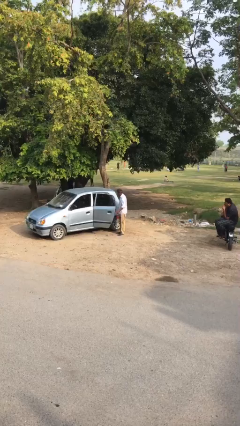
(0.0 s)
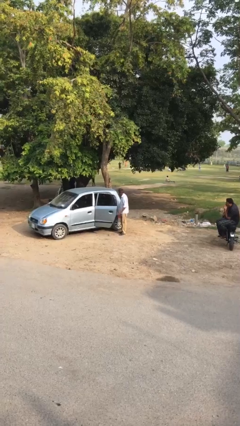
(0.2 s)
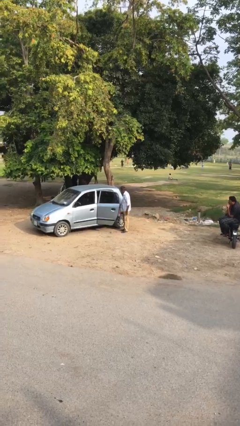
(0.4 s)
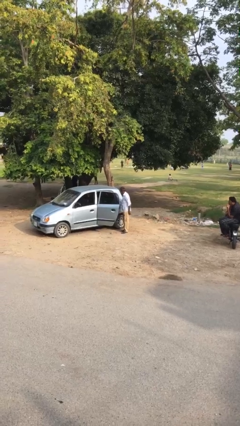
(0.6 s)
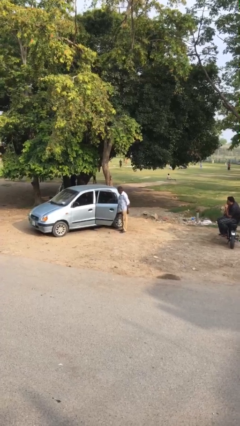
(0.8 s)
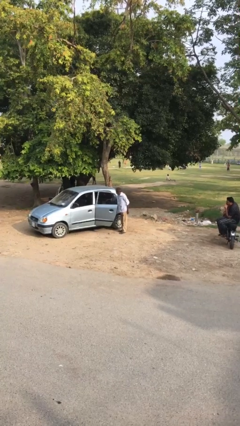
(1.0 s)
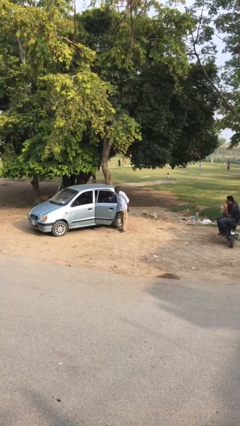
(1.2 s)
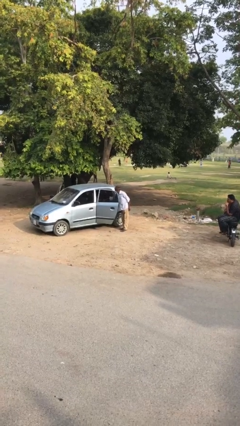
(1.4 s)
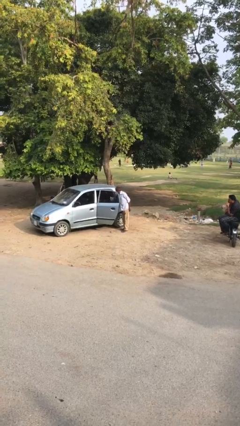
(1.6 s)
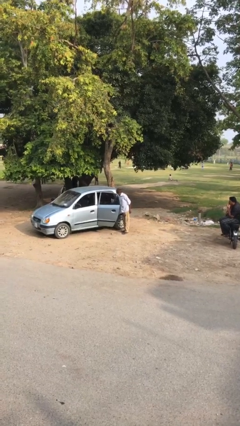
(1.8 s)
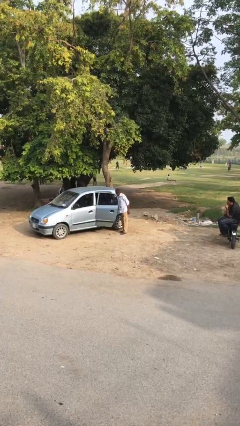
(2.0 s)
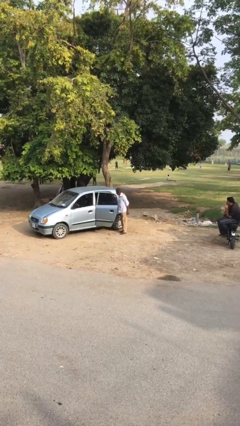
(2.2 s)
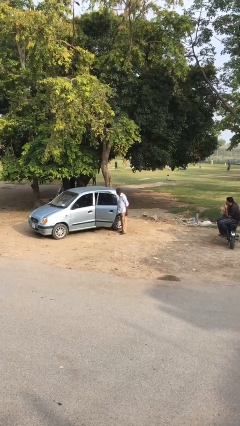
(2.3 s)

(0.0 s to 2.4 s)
person loads car

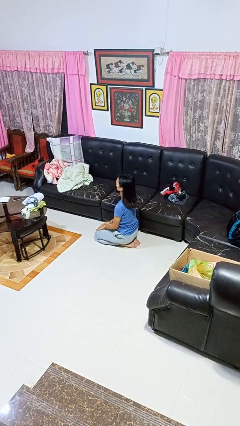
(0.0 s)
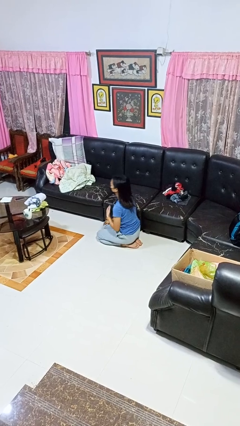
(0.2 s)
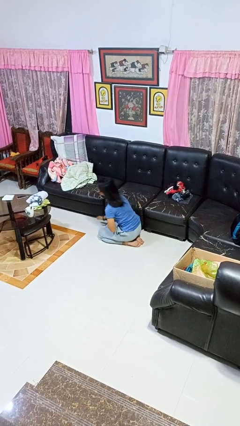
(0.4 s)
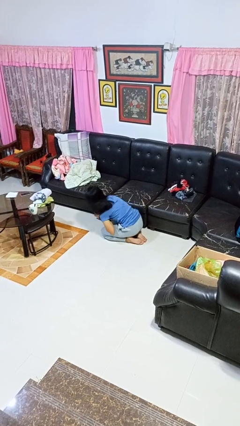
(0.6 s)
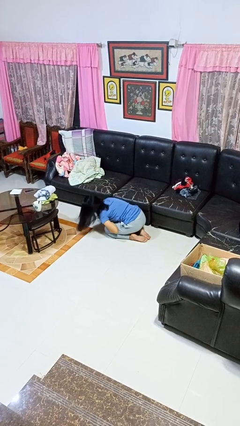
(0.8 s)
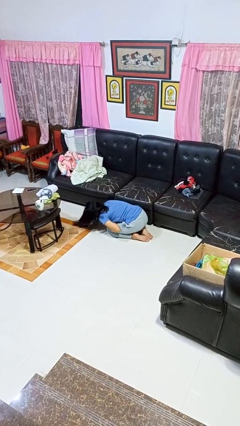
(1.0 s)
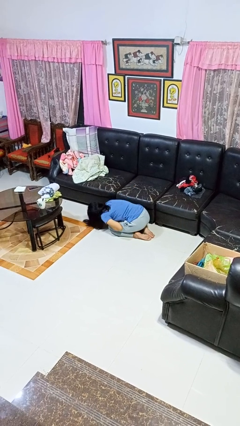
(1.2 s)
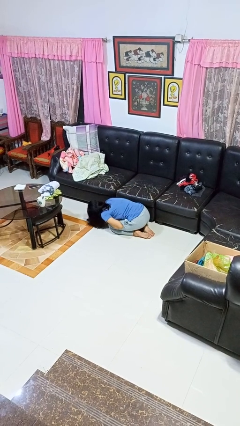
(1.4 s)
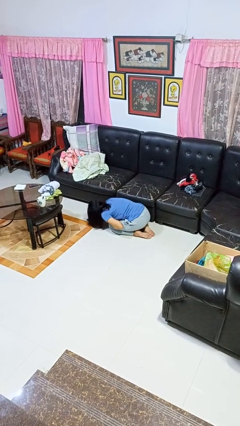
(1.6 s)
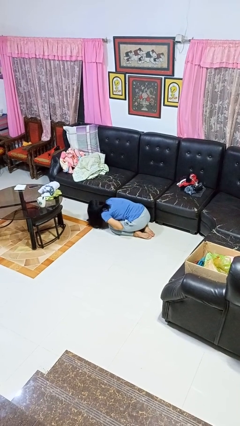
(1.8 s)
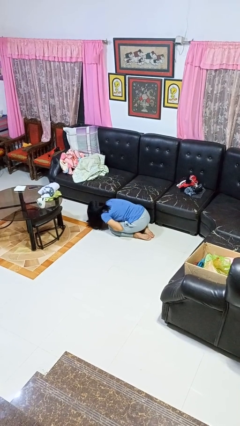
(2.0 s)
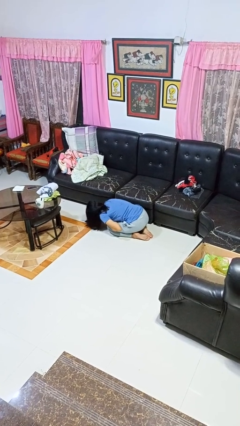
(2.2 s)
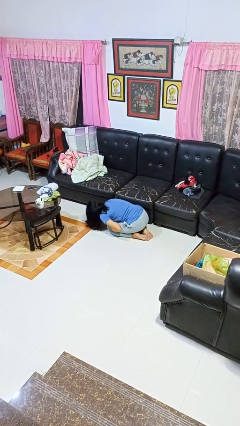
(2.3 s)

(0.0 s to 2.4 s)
person searches under couch

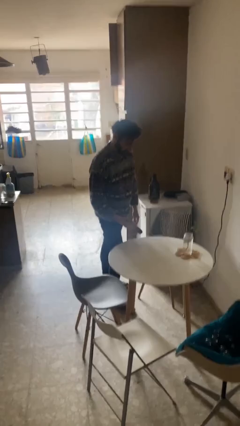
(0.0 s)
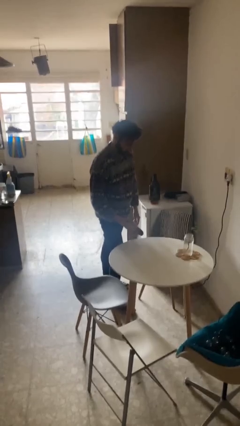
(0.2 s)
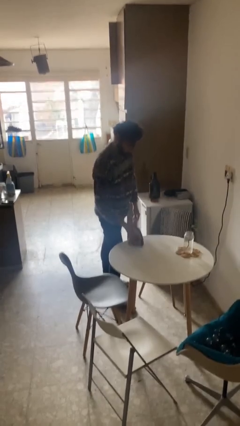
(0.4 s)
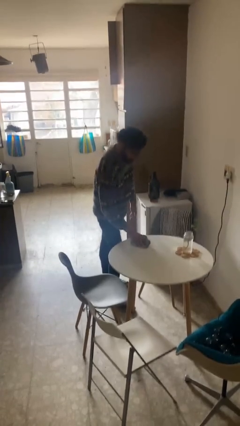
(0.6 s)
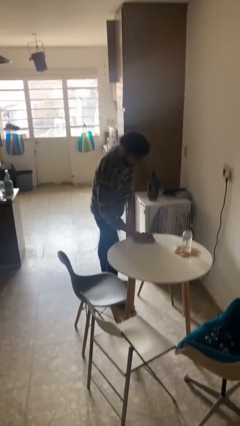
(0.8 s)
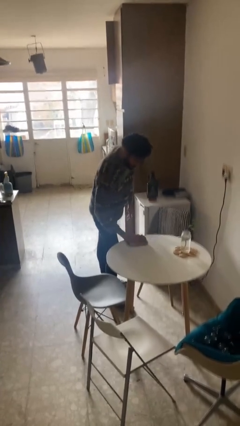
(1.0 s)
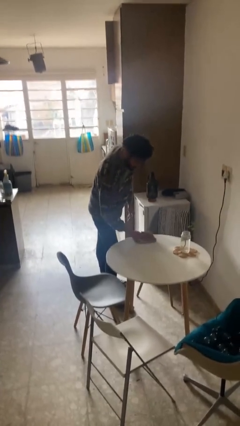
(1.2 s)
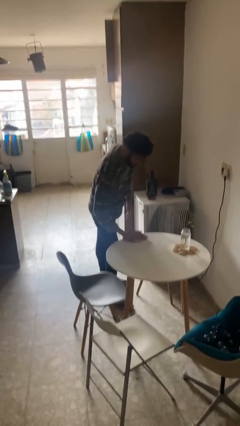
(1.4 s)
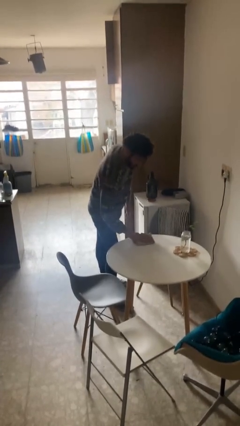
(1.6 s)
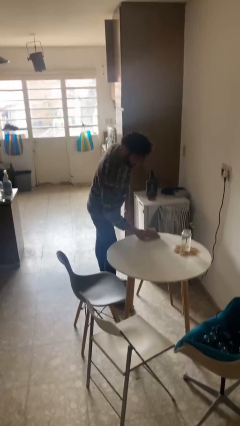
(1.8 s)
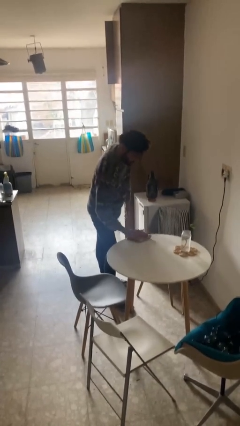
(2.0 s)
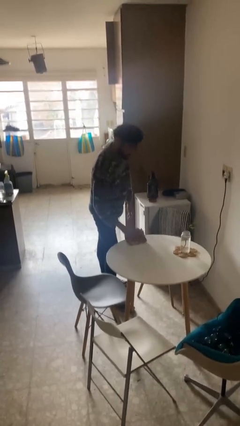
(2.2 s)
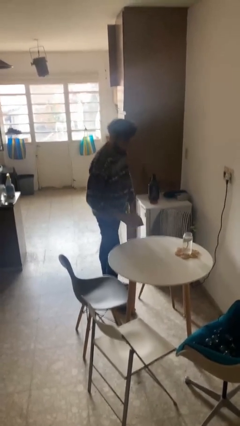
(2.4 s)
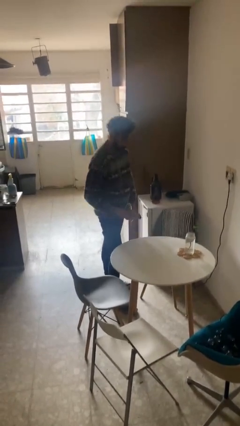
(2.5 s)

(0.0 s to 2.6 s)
person cleans table with rag

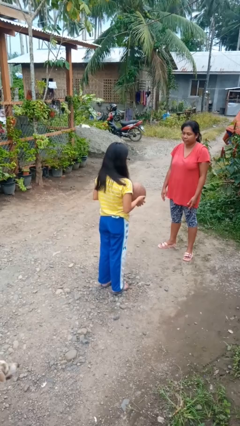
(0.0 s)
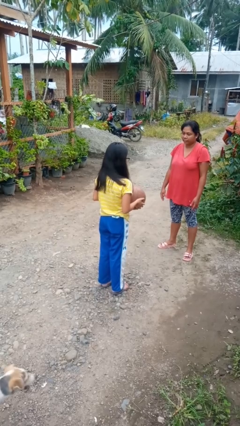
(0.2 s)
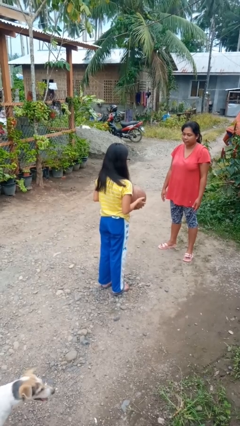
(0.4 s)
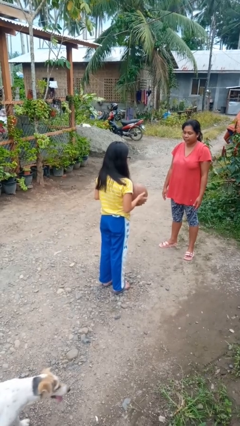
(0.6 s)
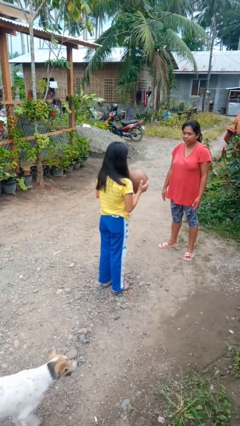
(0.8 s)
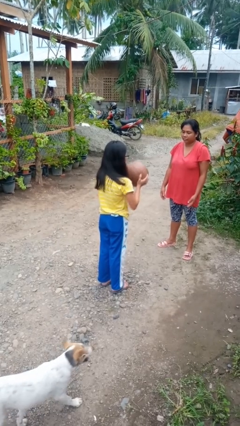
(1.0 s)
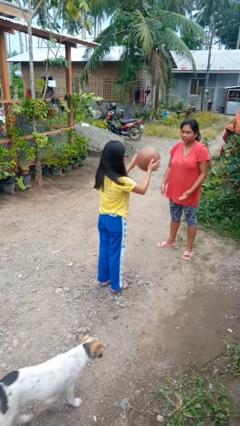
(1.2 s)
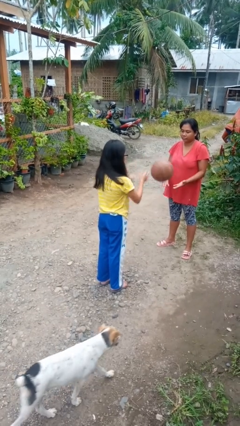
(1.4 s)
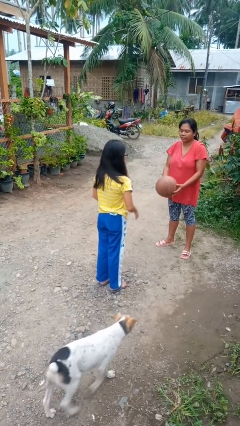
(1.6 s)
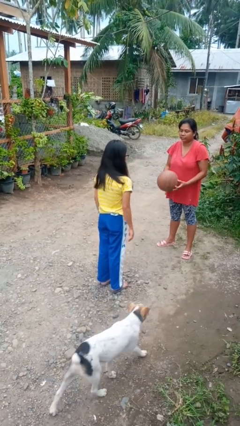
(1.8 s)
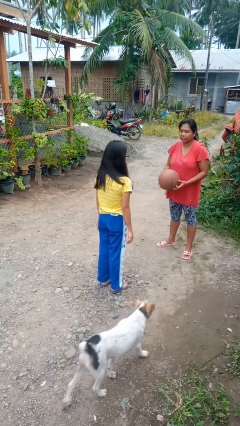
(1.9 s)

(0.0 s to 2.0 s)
person throws object to person

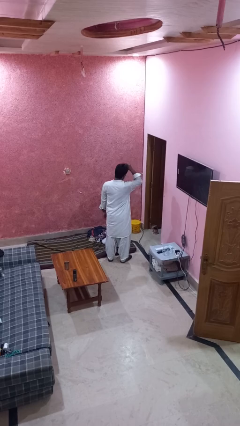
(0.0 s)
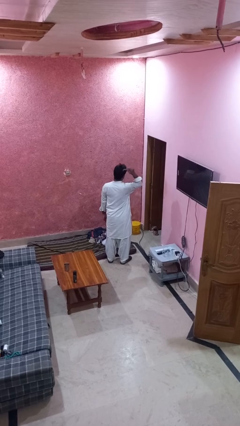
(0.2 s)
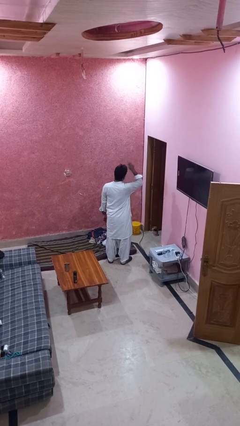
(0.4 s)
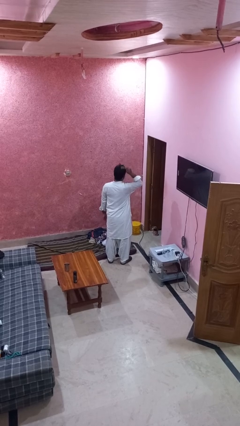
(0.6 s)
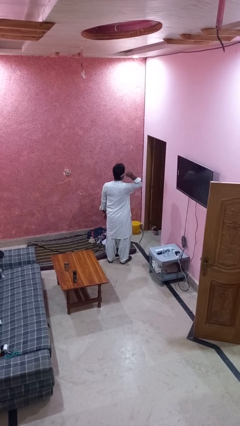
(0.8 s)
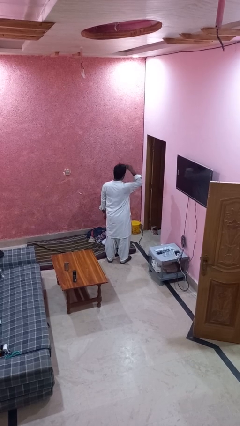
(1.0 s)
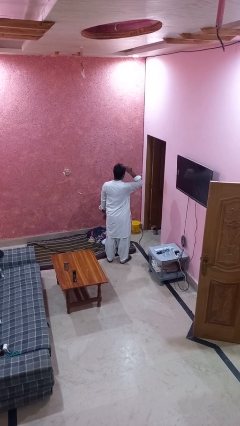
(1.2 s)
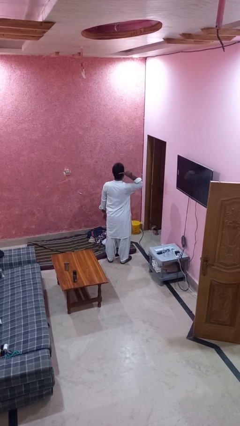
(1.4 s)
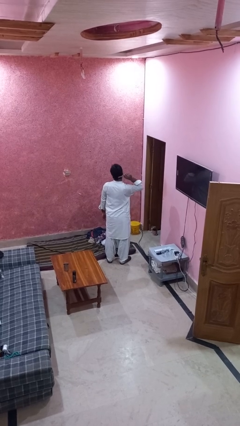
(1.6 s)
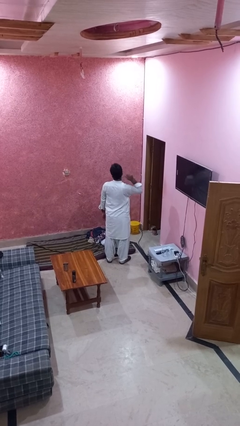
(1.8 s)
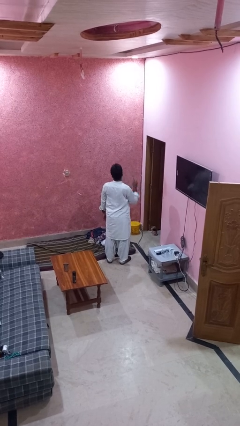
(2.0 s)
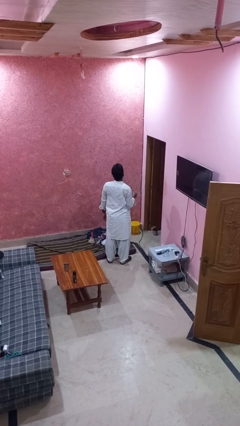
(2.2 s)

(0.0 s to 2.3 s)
person brushes hair

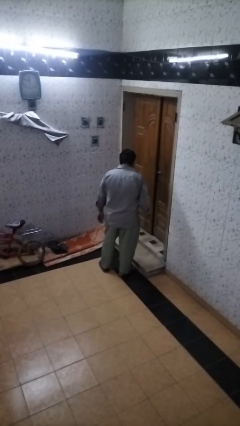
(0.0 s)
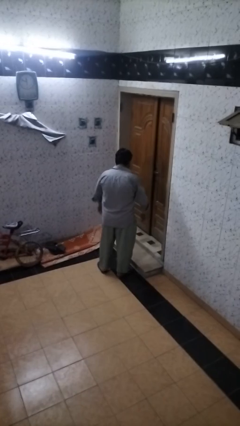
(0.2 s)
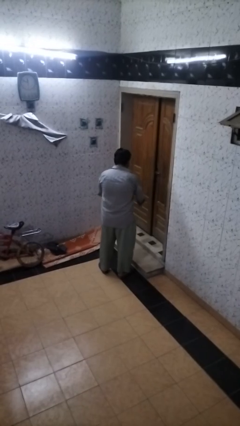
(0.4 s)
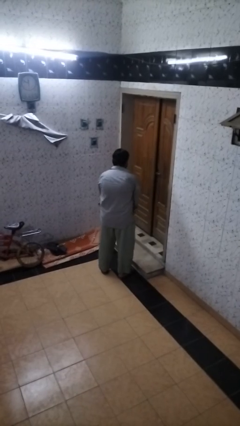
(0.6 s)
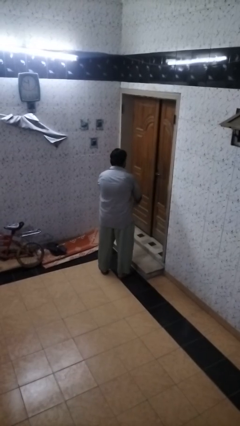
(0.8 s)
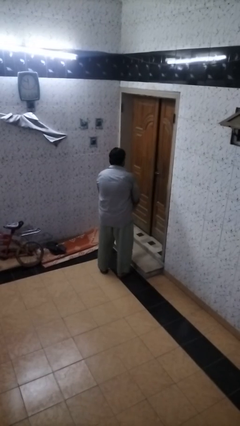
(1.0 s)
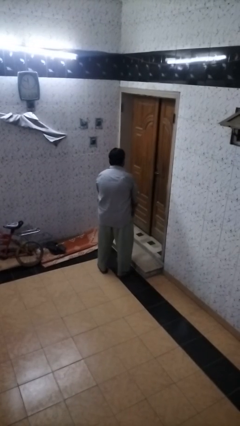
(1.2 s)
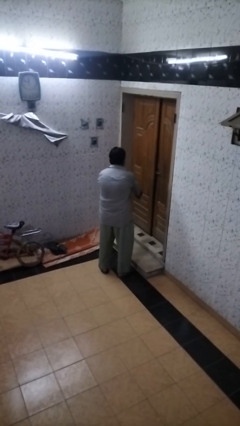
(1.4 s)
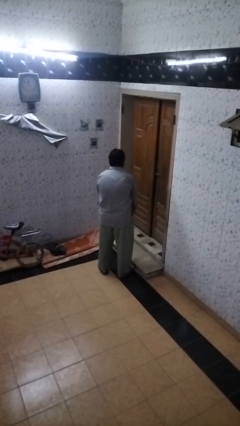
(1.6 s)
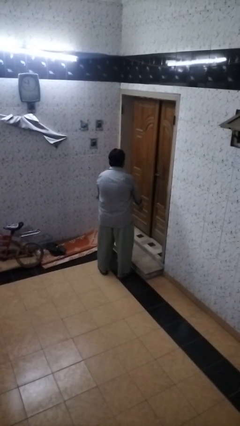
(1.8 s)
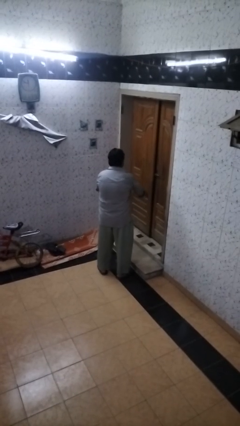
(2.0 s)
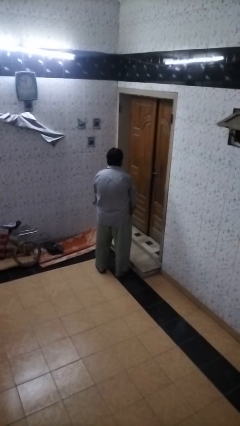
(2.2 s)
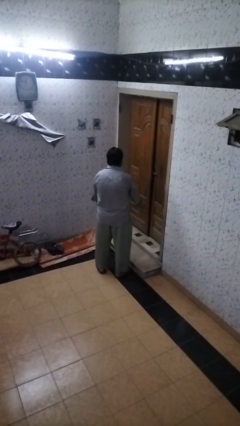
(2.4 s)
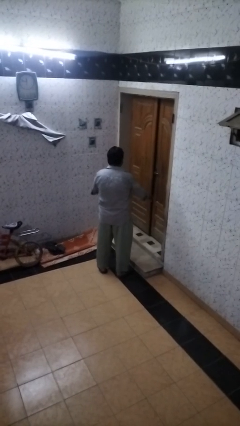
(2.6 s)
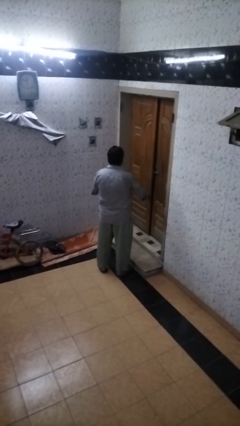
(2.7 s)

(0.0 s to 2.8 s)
person slaps hands on thighs

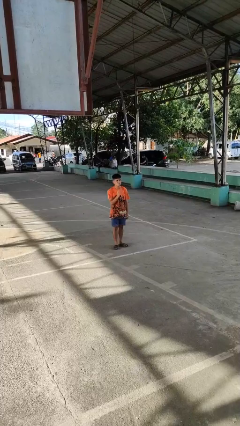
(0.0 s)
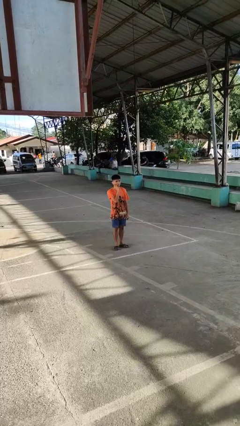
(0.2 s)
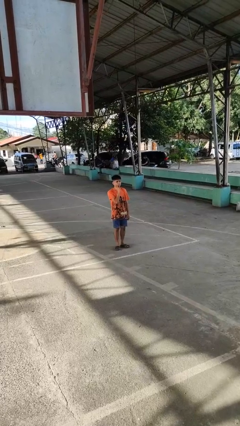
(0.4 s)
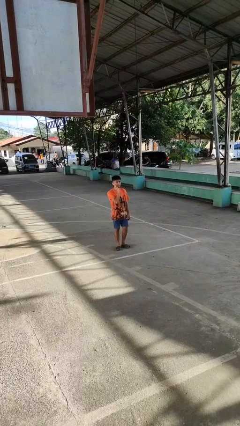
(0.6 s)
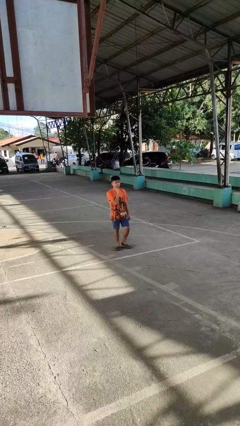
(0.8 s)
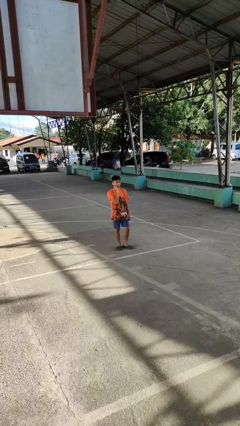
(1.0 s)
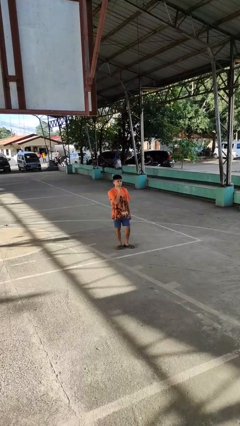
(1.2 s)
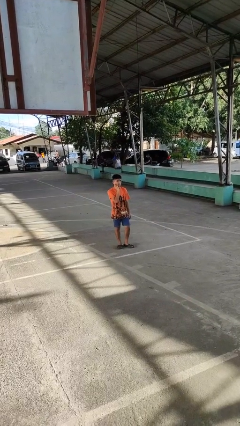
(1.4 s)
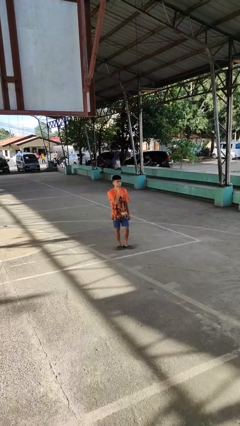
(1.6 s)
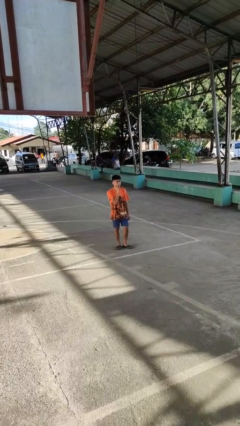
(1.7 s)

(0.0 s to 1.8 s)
person scratches face

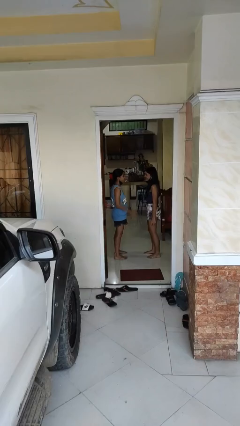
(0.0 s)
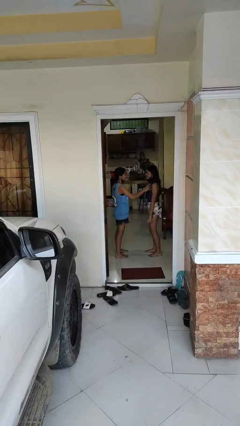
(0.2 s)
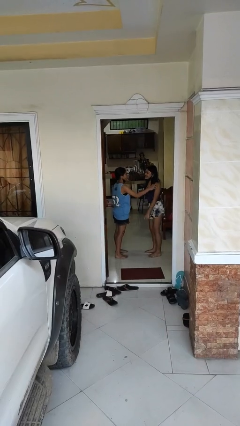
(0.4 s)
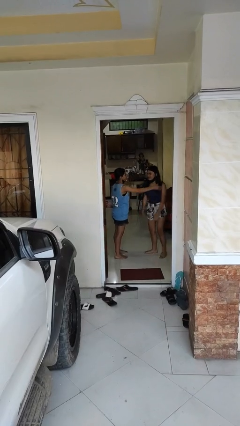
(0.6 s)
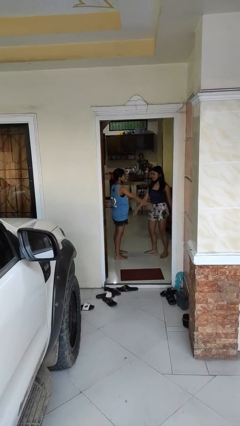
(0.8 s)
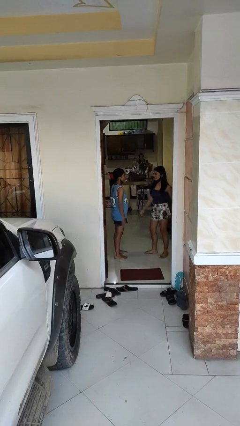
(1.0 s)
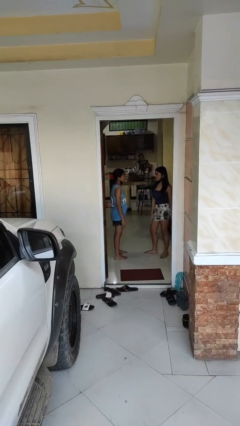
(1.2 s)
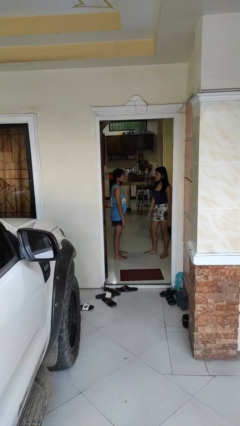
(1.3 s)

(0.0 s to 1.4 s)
person shoves person
